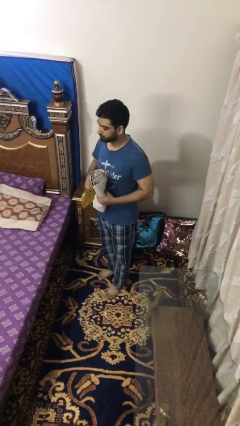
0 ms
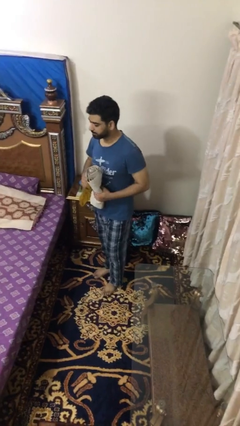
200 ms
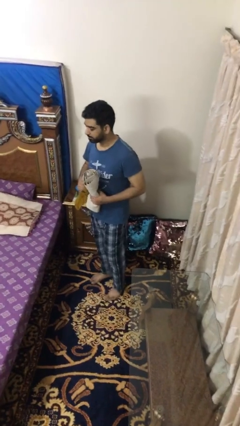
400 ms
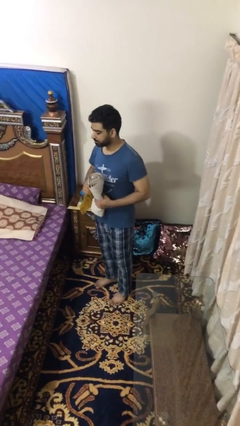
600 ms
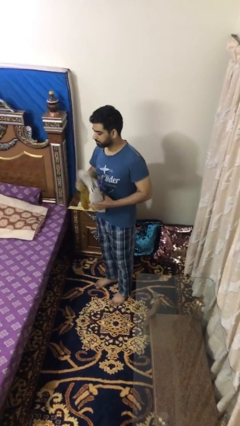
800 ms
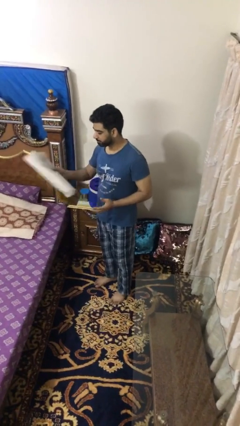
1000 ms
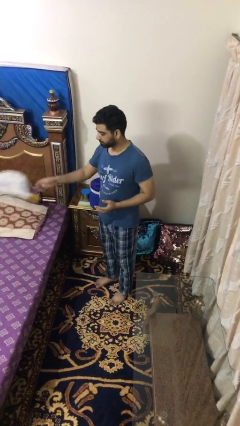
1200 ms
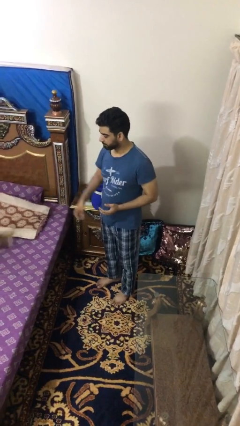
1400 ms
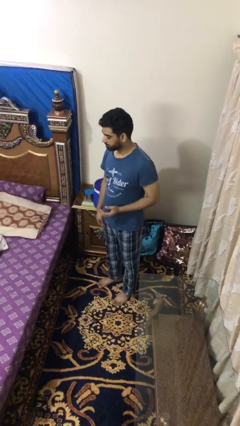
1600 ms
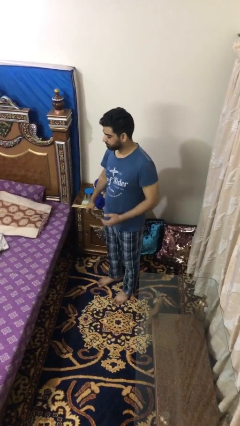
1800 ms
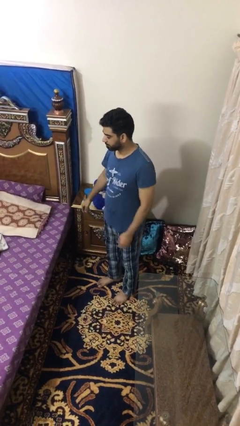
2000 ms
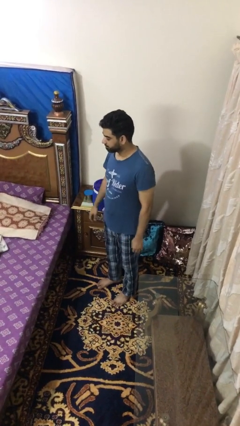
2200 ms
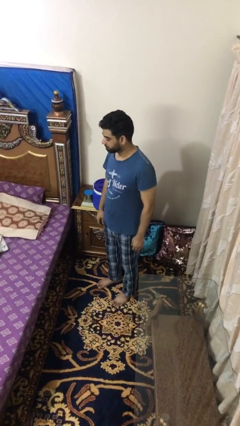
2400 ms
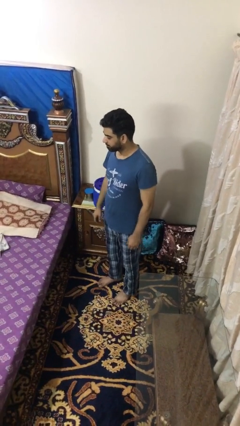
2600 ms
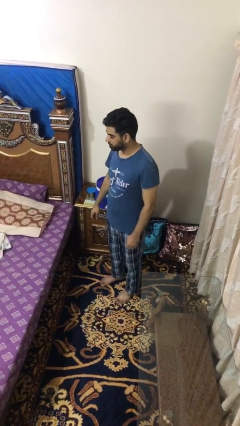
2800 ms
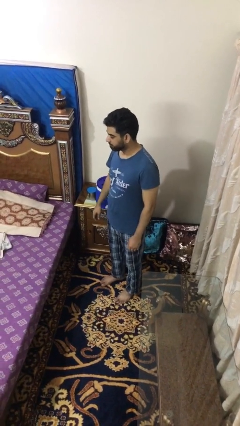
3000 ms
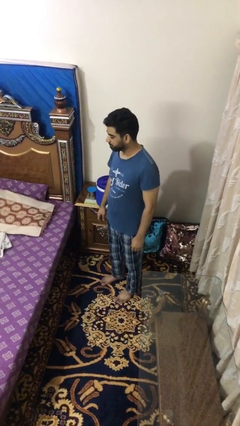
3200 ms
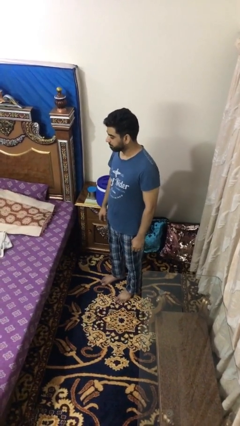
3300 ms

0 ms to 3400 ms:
person throws object on bed

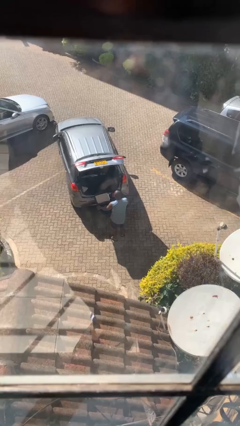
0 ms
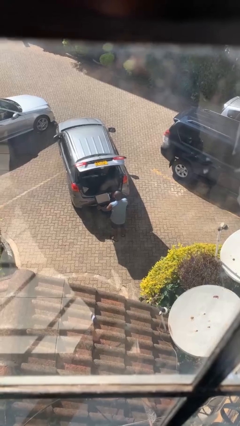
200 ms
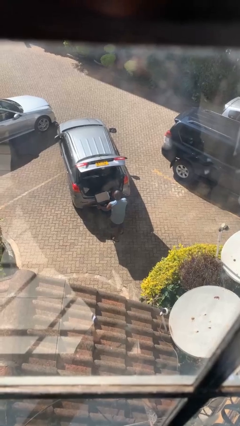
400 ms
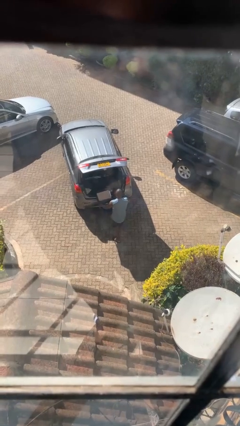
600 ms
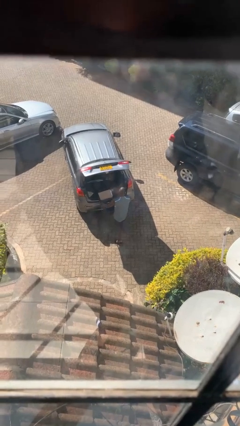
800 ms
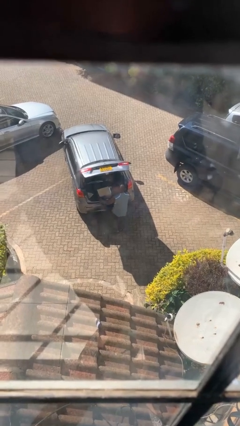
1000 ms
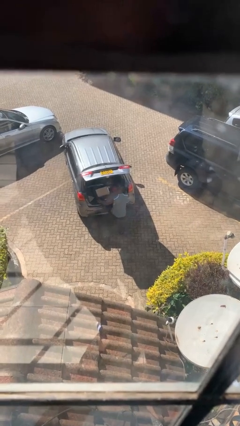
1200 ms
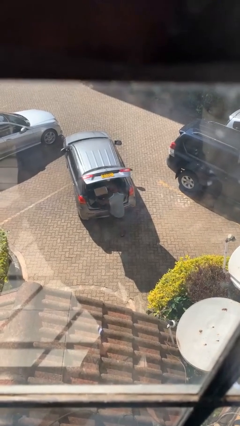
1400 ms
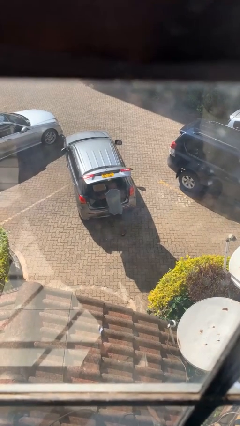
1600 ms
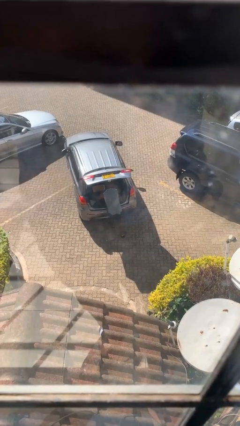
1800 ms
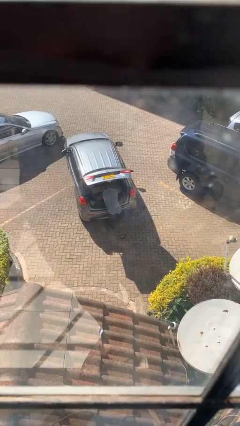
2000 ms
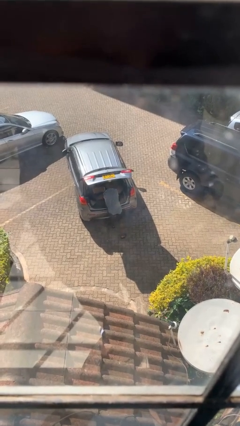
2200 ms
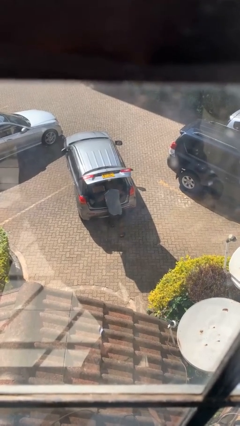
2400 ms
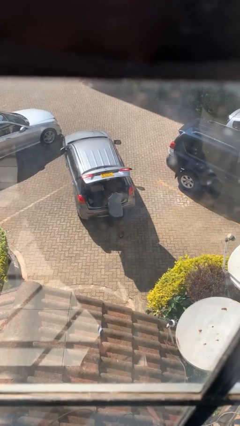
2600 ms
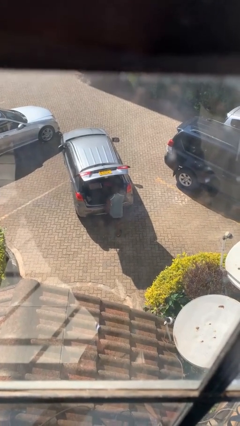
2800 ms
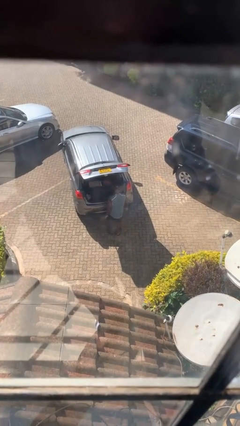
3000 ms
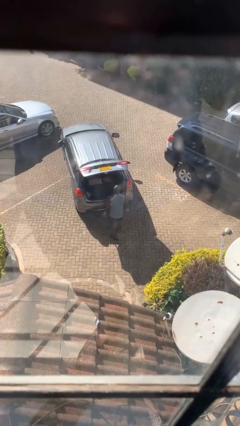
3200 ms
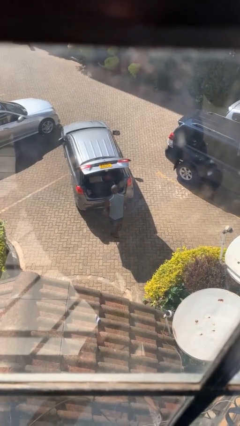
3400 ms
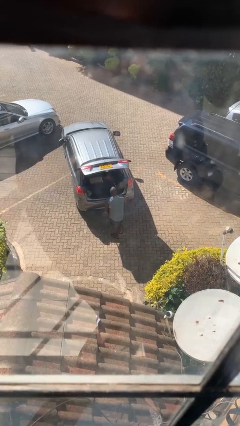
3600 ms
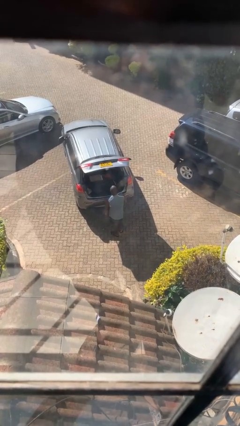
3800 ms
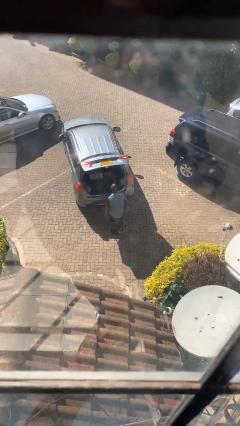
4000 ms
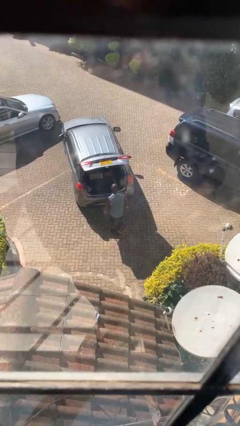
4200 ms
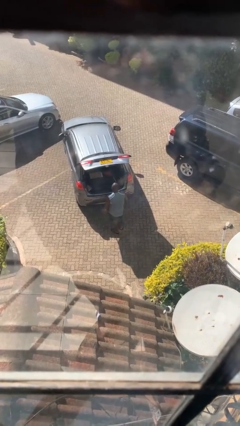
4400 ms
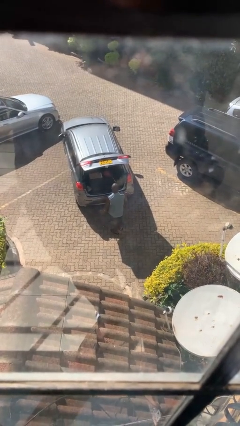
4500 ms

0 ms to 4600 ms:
person loads car

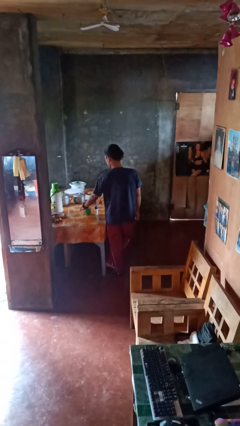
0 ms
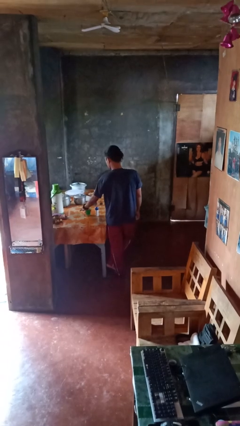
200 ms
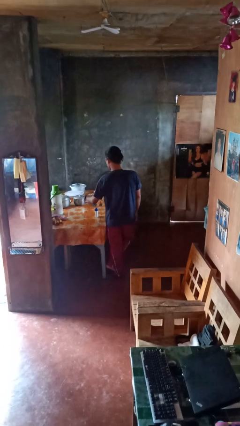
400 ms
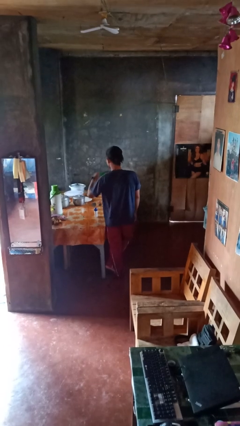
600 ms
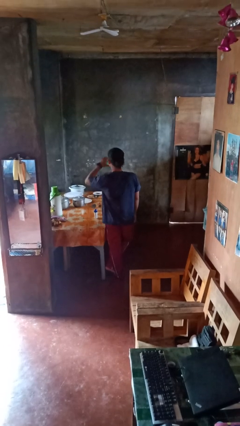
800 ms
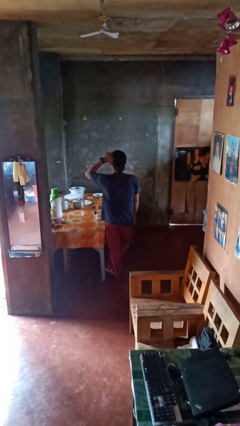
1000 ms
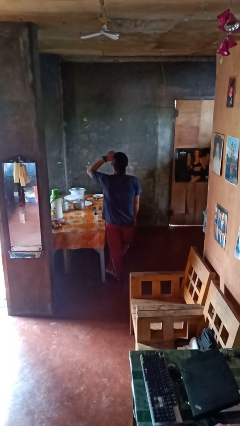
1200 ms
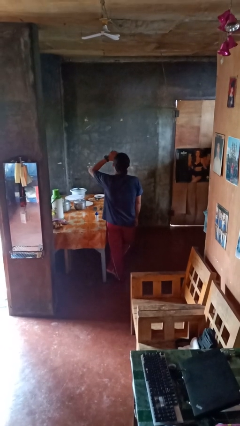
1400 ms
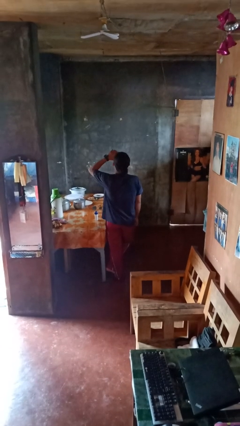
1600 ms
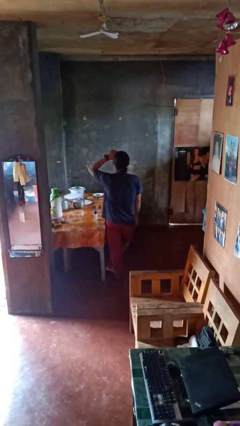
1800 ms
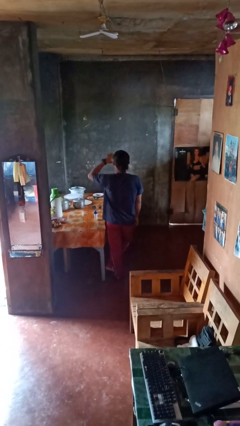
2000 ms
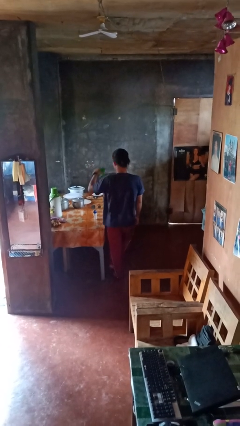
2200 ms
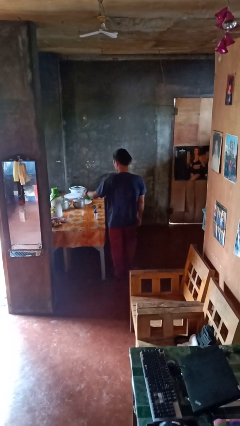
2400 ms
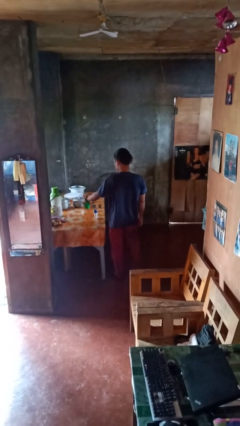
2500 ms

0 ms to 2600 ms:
person drinks from cup

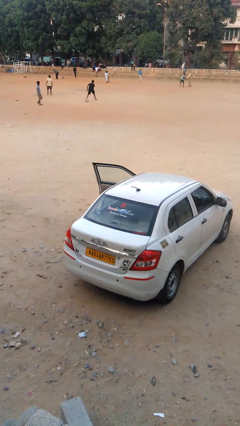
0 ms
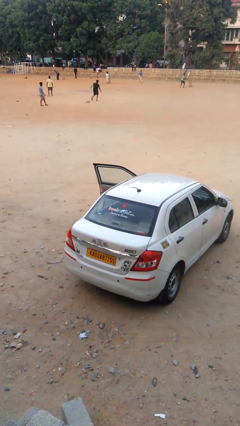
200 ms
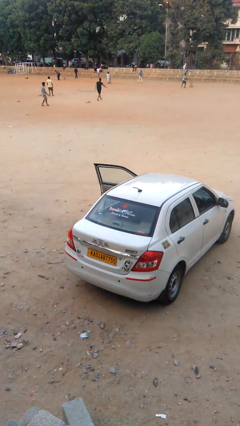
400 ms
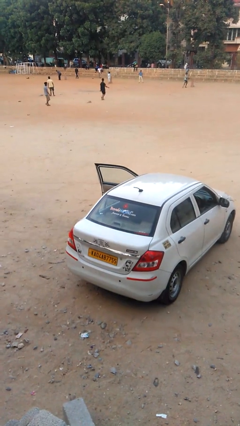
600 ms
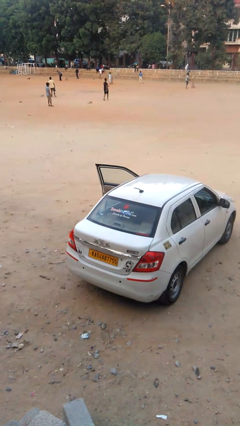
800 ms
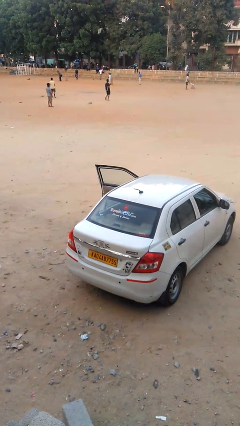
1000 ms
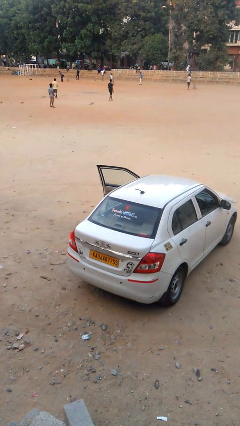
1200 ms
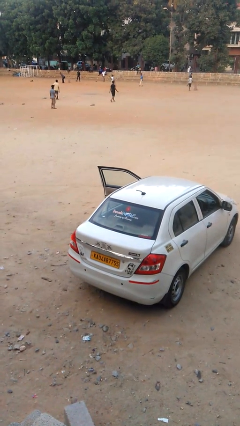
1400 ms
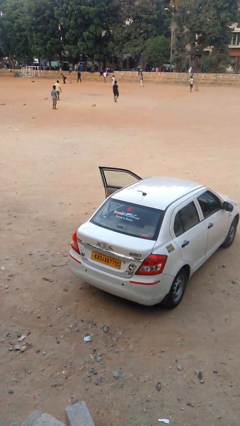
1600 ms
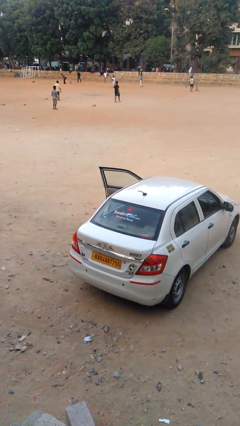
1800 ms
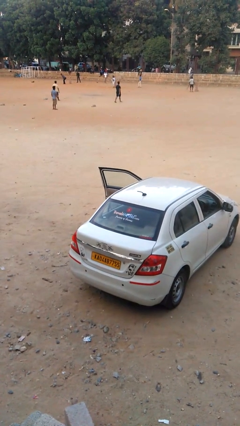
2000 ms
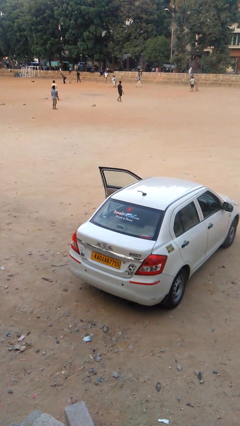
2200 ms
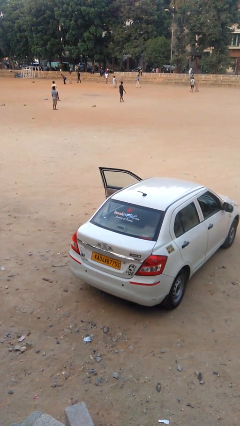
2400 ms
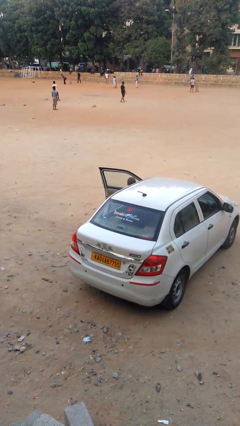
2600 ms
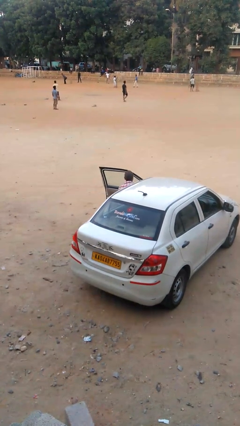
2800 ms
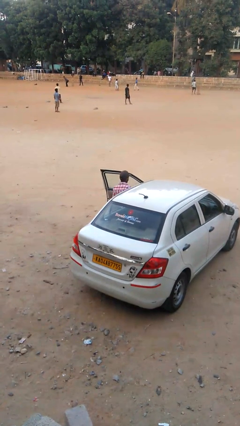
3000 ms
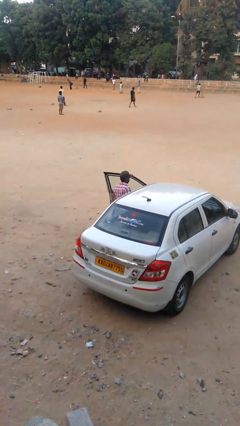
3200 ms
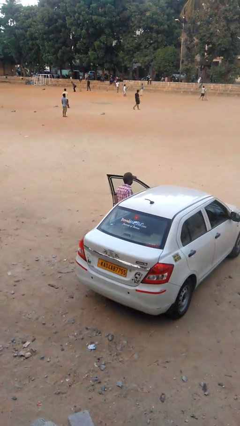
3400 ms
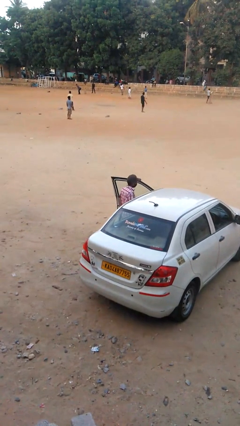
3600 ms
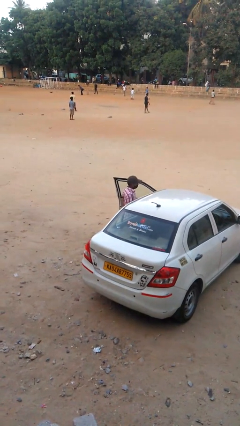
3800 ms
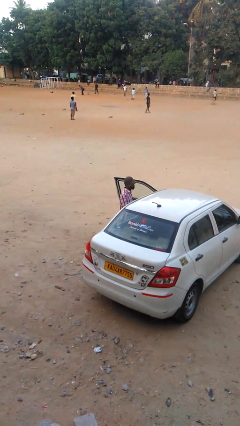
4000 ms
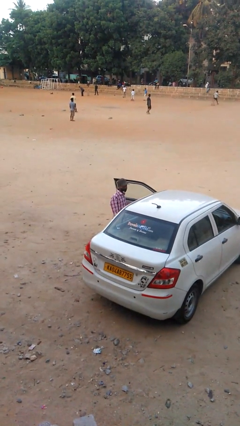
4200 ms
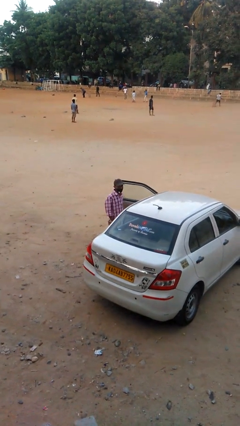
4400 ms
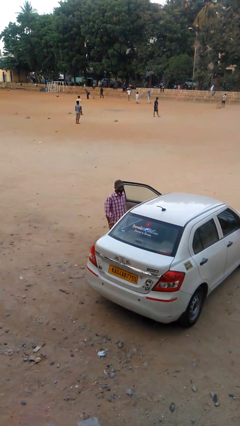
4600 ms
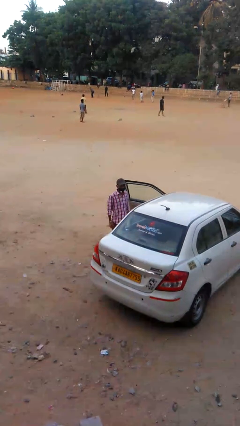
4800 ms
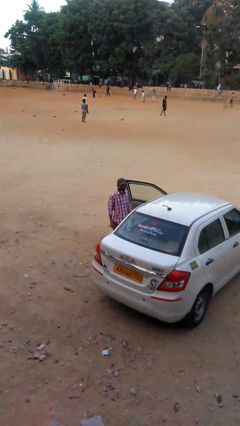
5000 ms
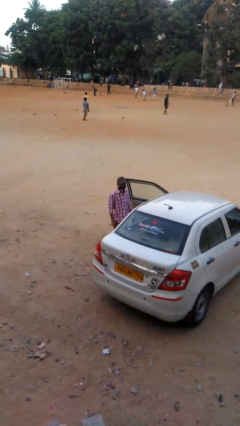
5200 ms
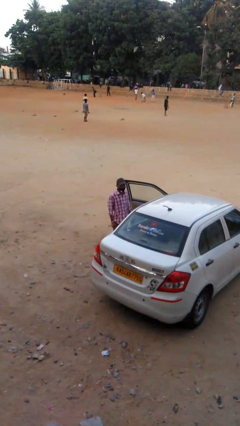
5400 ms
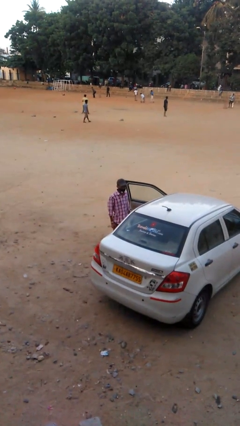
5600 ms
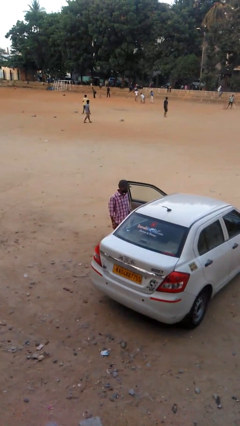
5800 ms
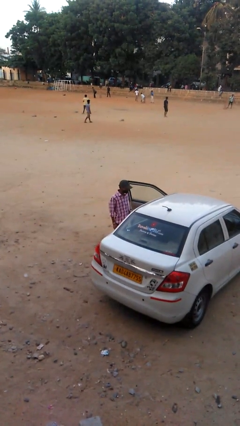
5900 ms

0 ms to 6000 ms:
person exits car

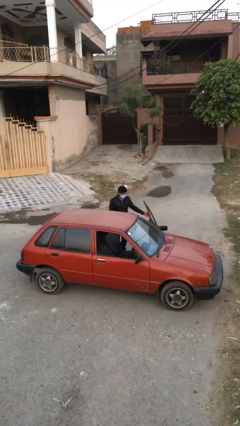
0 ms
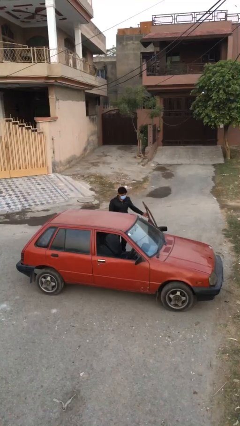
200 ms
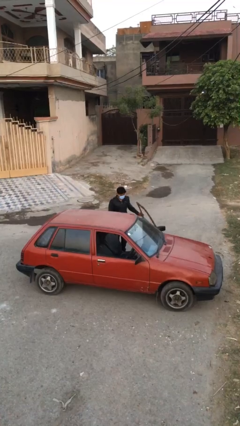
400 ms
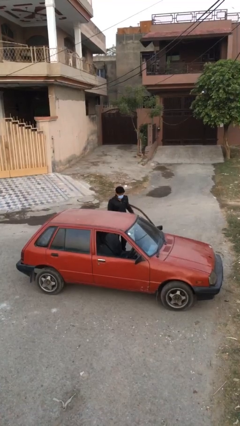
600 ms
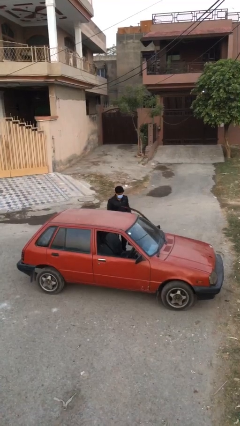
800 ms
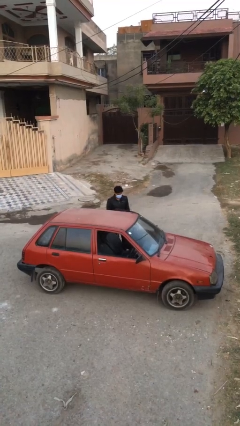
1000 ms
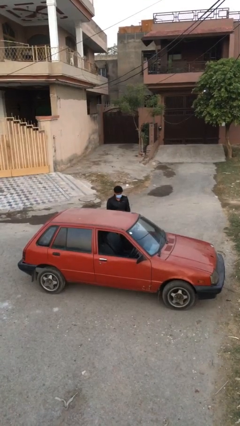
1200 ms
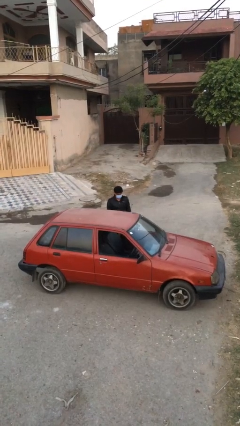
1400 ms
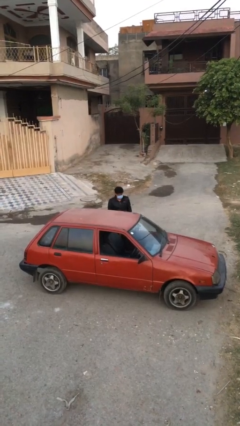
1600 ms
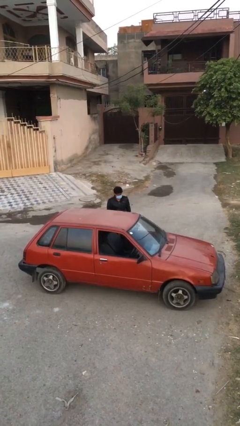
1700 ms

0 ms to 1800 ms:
person closes car door
